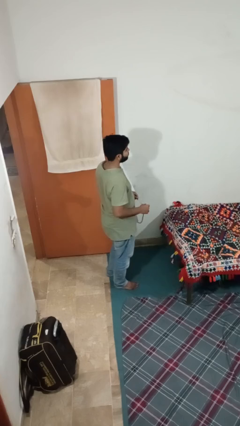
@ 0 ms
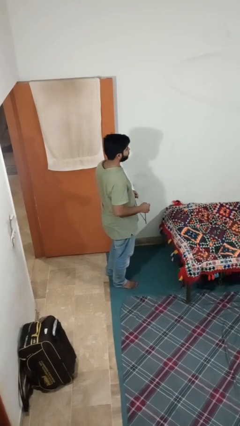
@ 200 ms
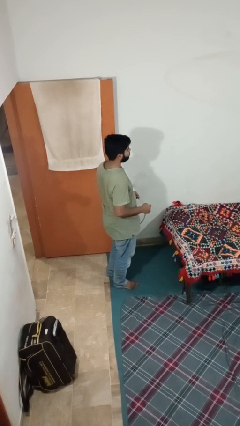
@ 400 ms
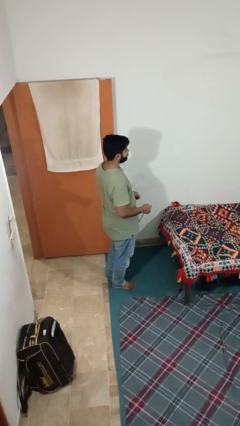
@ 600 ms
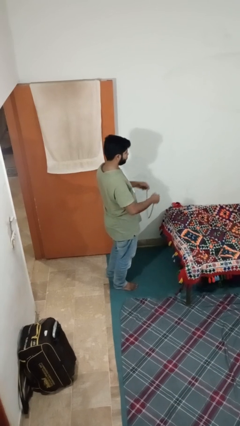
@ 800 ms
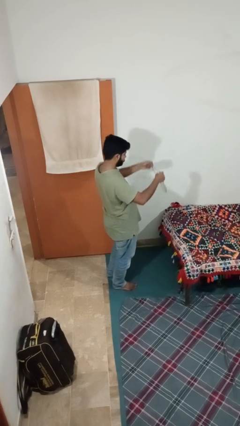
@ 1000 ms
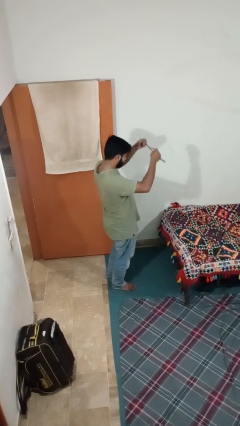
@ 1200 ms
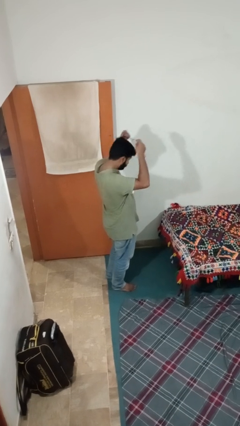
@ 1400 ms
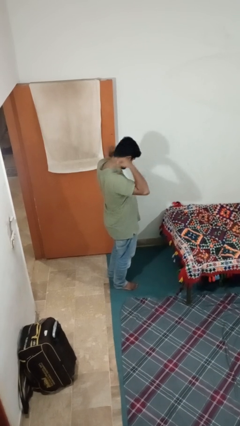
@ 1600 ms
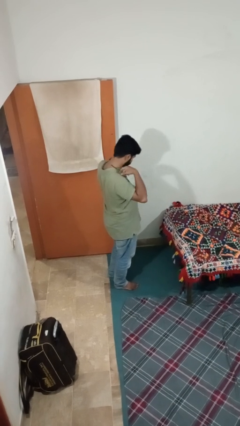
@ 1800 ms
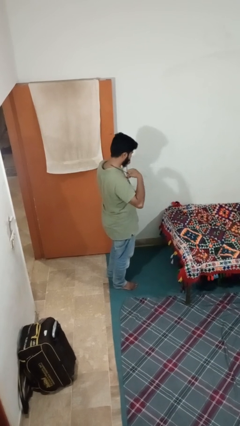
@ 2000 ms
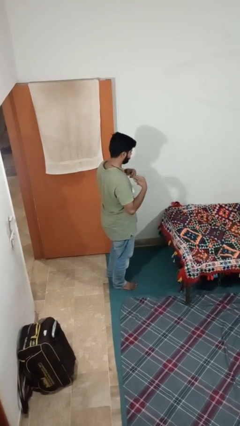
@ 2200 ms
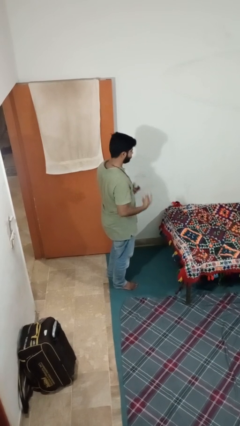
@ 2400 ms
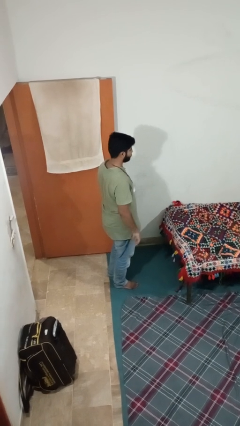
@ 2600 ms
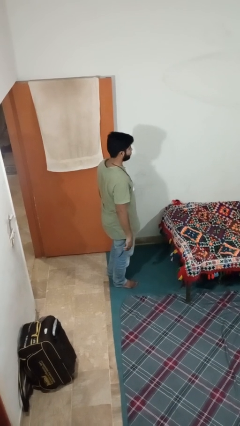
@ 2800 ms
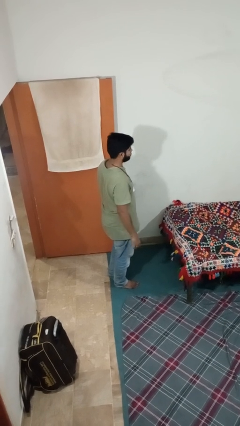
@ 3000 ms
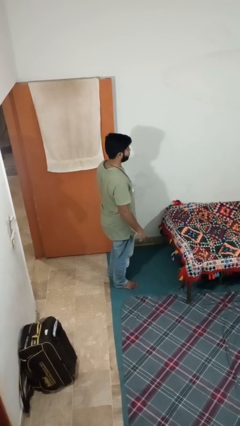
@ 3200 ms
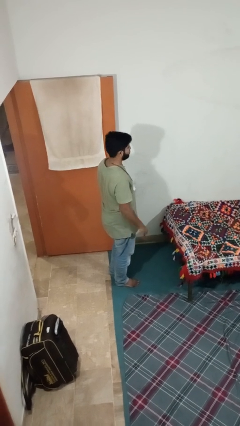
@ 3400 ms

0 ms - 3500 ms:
person puts on necklace

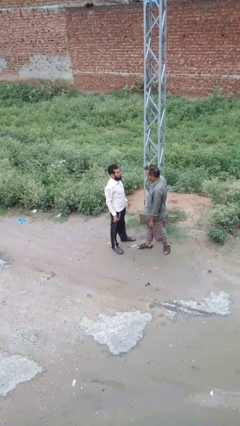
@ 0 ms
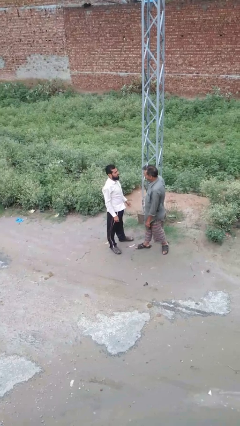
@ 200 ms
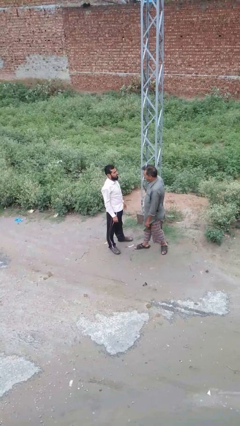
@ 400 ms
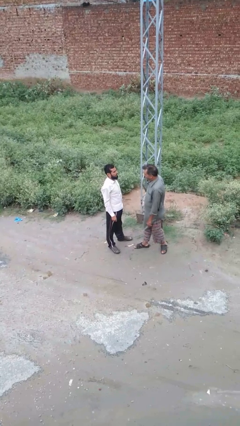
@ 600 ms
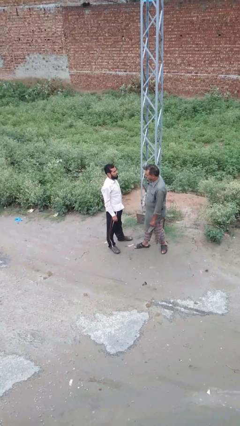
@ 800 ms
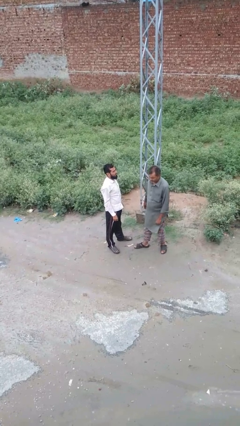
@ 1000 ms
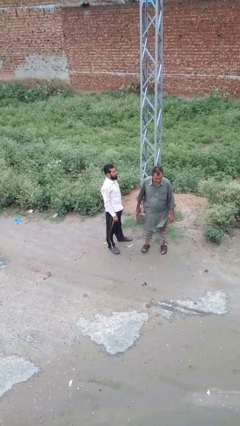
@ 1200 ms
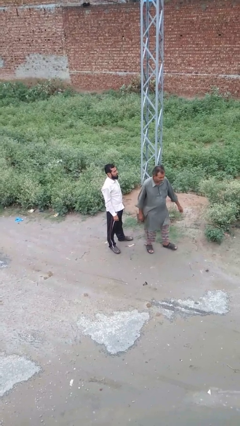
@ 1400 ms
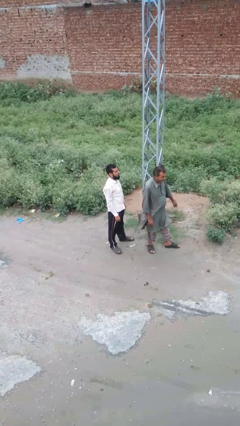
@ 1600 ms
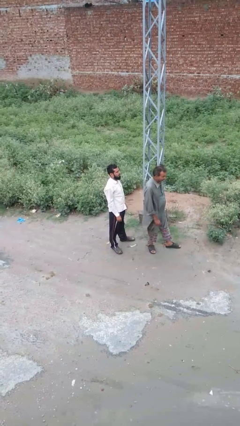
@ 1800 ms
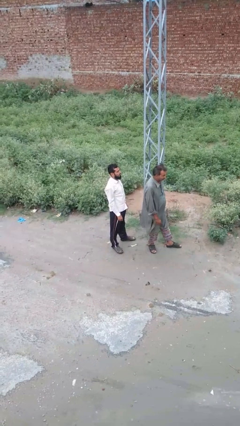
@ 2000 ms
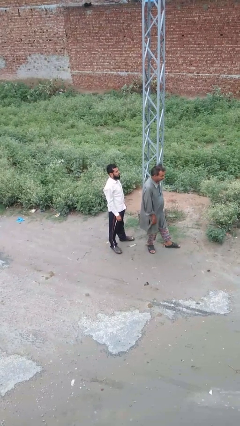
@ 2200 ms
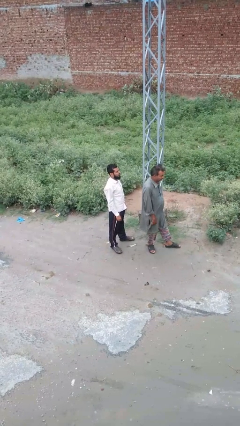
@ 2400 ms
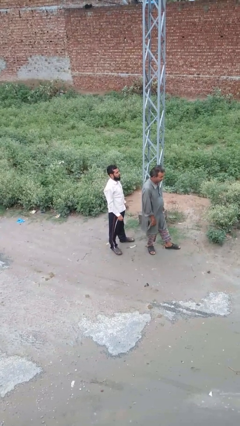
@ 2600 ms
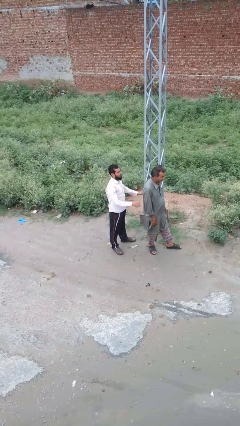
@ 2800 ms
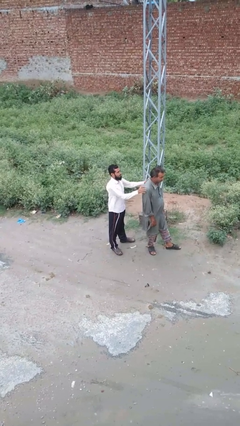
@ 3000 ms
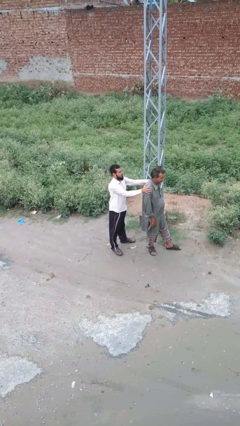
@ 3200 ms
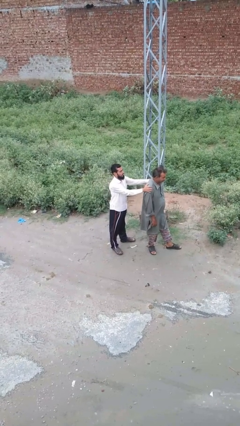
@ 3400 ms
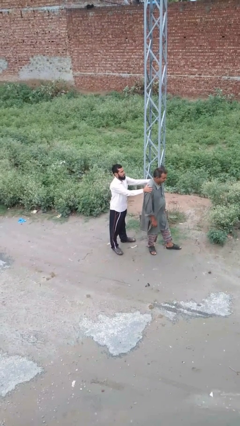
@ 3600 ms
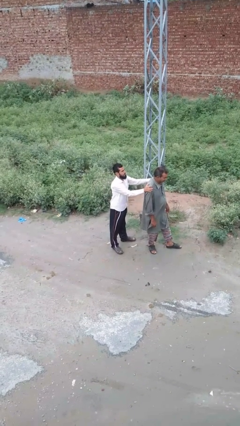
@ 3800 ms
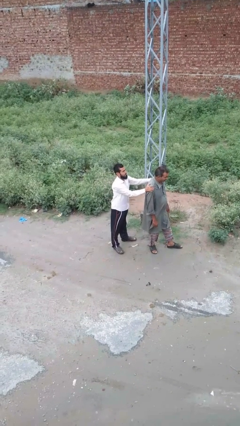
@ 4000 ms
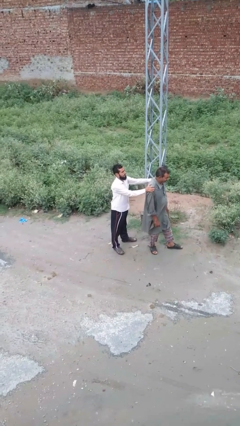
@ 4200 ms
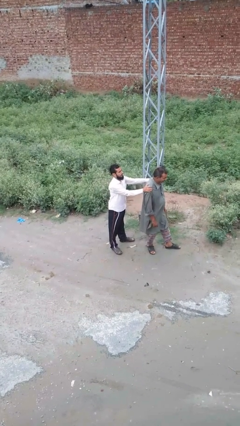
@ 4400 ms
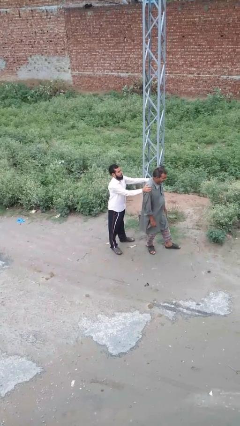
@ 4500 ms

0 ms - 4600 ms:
person grabs person by shoulder

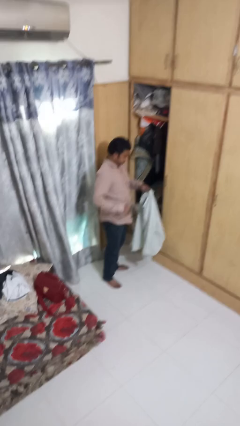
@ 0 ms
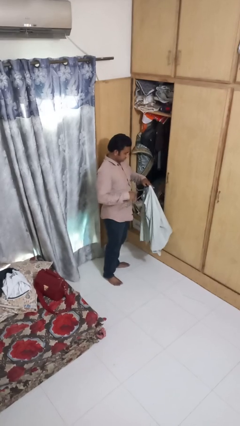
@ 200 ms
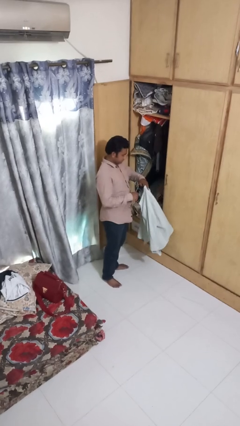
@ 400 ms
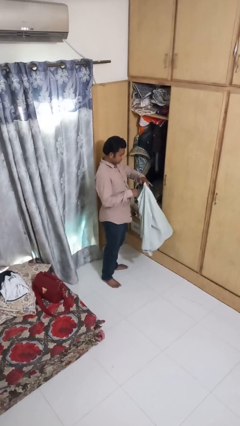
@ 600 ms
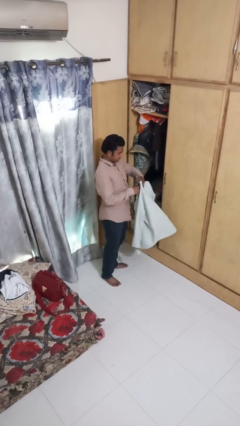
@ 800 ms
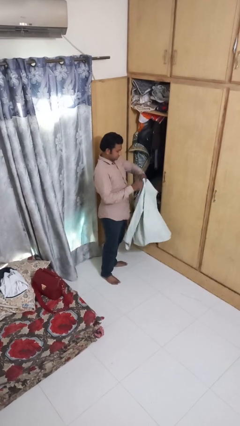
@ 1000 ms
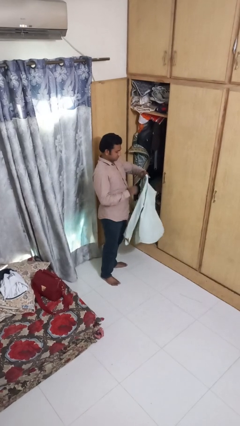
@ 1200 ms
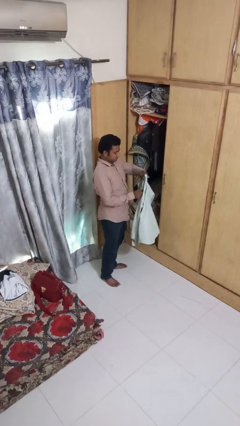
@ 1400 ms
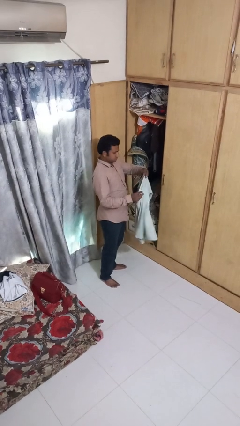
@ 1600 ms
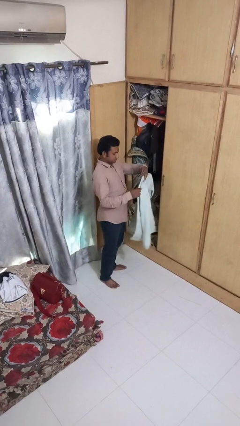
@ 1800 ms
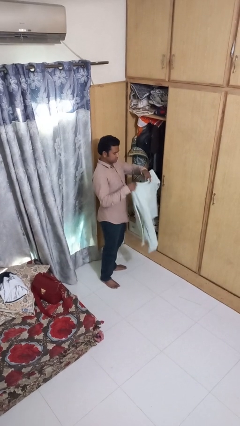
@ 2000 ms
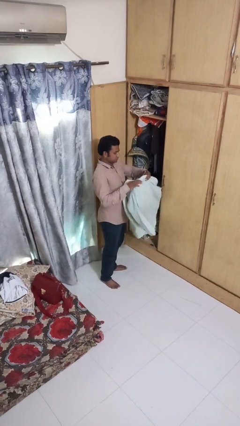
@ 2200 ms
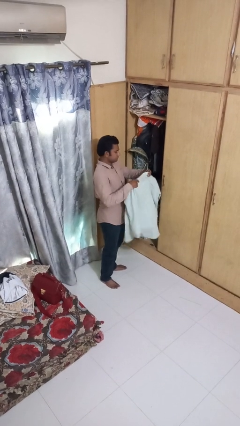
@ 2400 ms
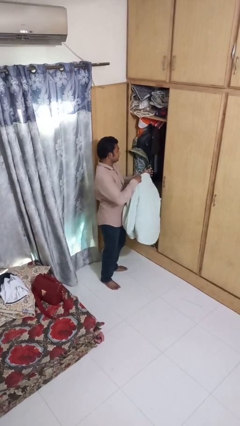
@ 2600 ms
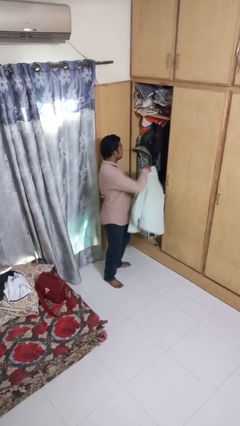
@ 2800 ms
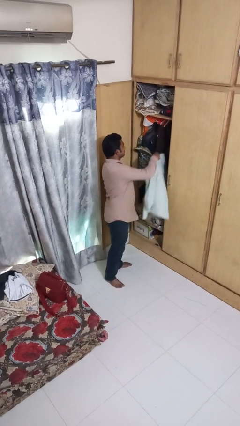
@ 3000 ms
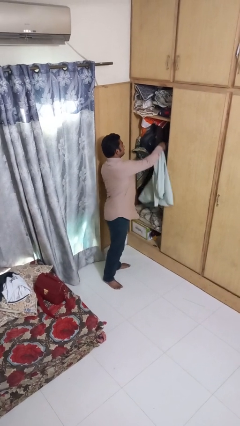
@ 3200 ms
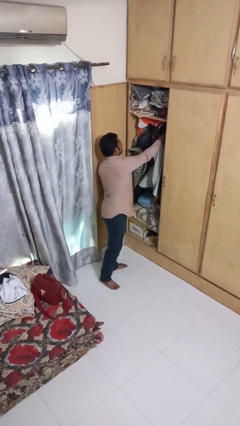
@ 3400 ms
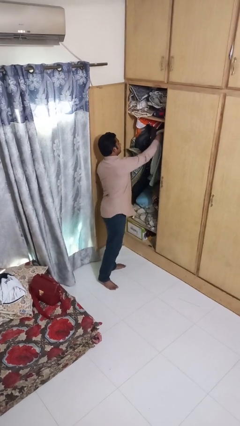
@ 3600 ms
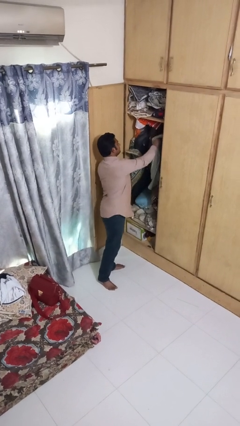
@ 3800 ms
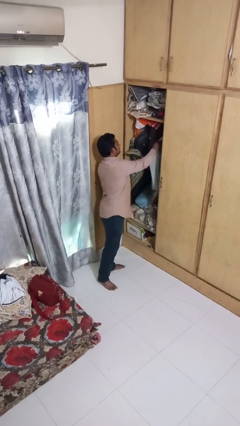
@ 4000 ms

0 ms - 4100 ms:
person puts clothes into closet

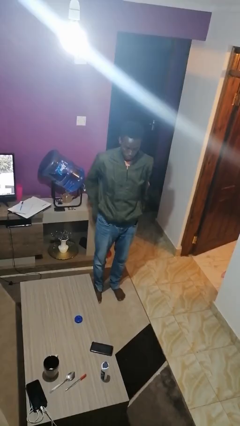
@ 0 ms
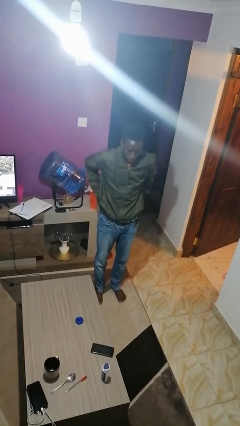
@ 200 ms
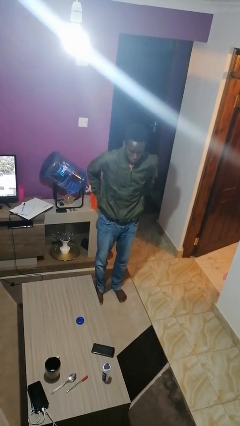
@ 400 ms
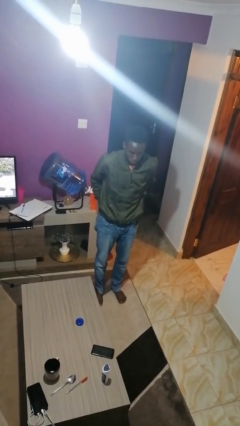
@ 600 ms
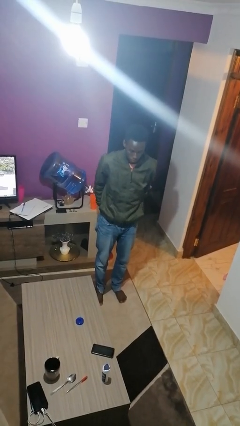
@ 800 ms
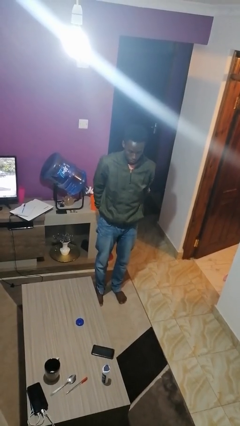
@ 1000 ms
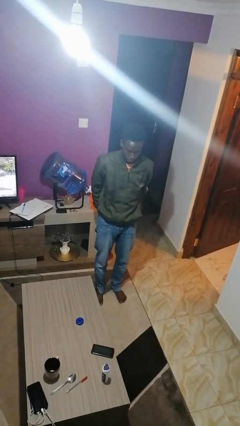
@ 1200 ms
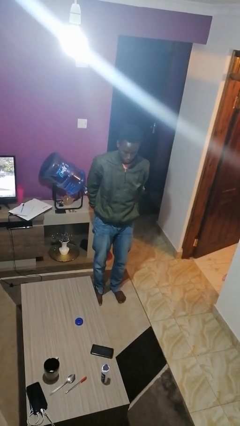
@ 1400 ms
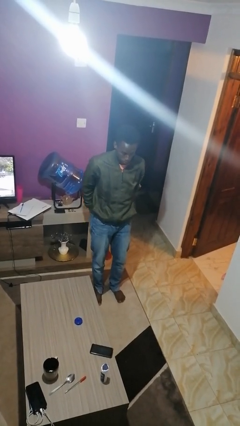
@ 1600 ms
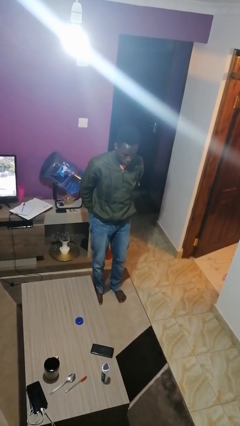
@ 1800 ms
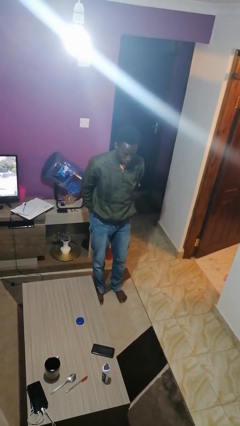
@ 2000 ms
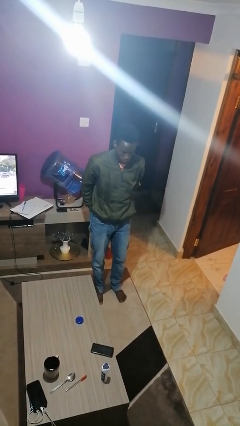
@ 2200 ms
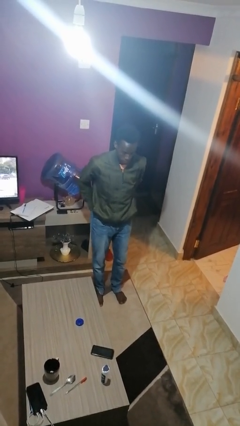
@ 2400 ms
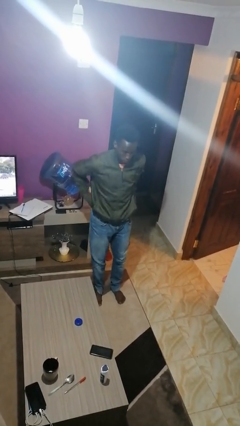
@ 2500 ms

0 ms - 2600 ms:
person puts hands in back pockets

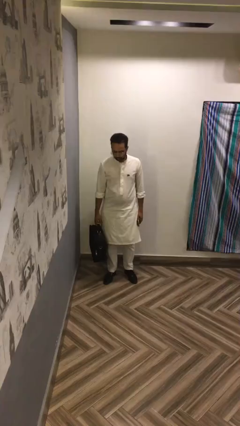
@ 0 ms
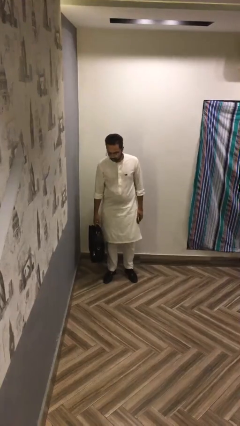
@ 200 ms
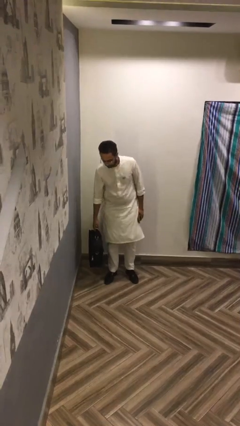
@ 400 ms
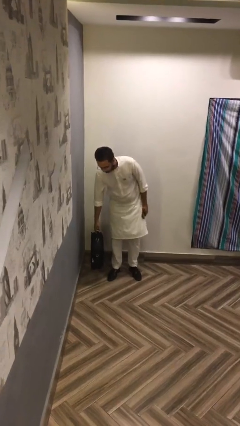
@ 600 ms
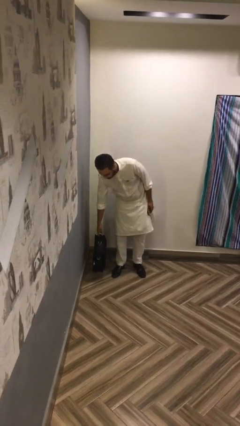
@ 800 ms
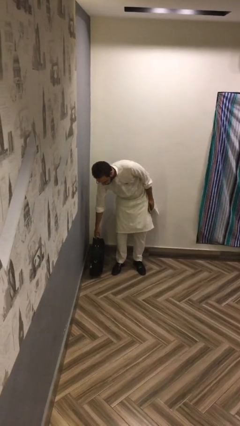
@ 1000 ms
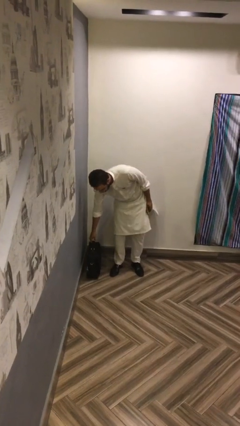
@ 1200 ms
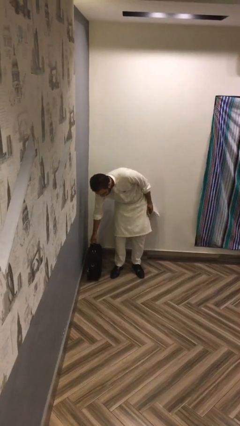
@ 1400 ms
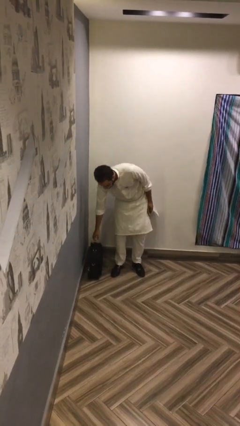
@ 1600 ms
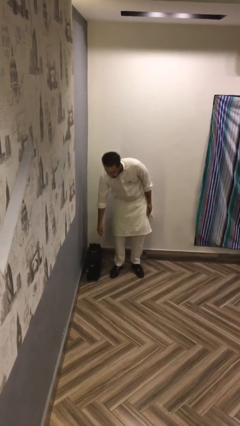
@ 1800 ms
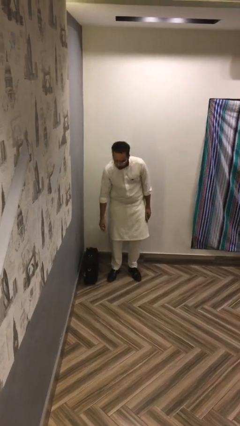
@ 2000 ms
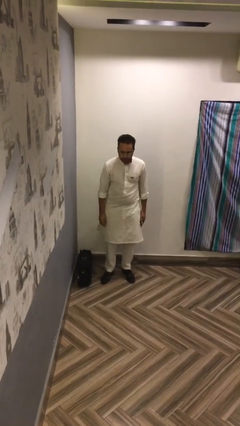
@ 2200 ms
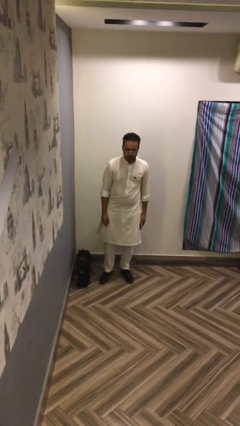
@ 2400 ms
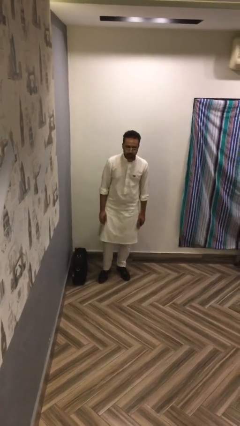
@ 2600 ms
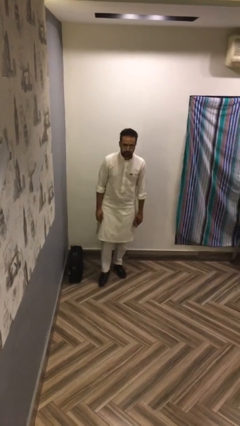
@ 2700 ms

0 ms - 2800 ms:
person puts down object on floor

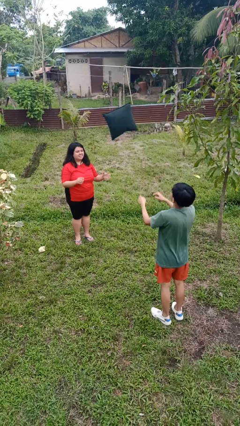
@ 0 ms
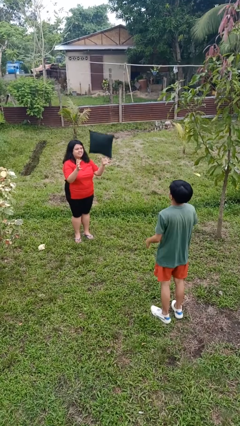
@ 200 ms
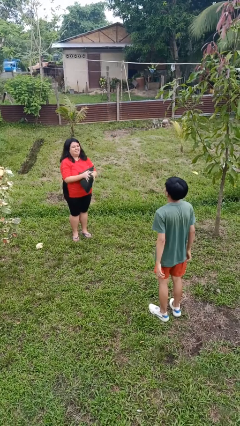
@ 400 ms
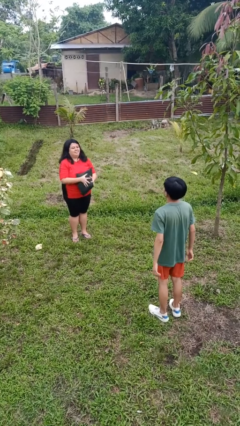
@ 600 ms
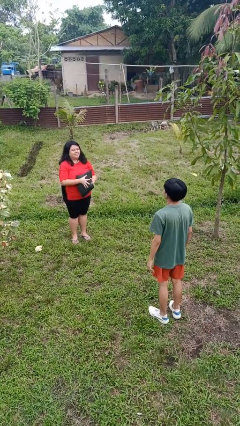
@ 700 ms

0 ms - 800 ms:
person catches object from person
